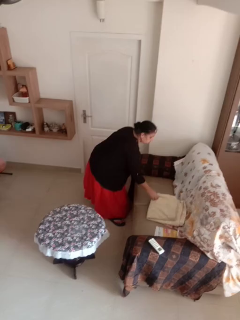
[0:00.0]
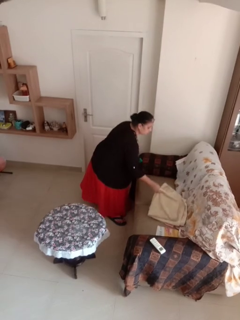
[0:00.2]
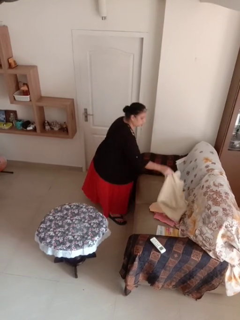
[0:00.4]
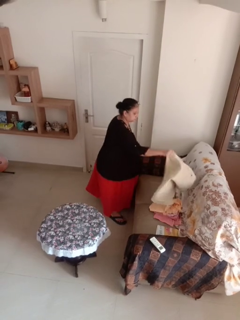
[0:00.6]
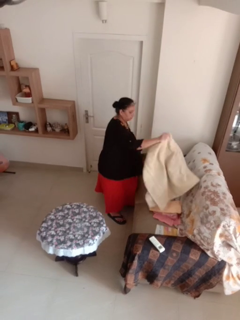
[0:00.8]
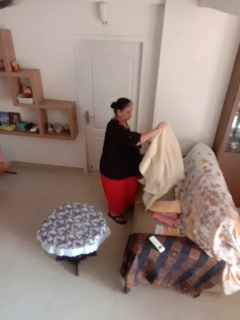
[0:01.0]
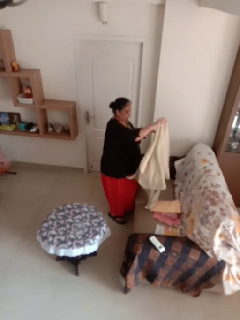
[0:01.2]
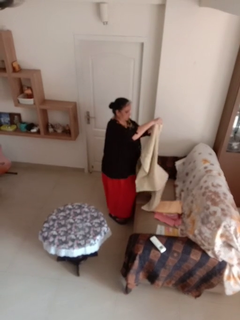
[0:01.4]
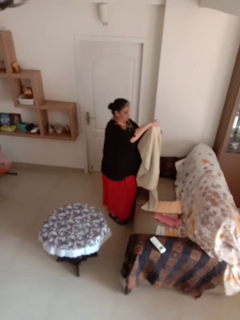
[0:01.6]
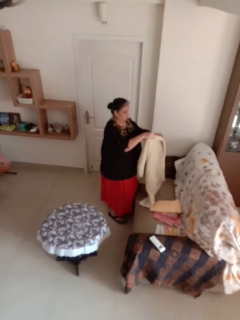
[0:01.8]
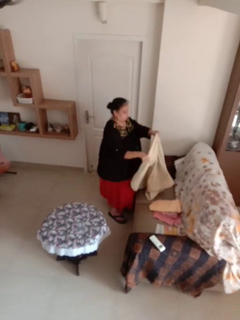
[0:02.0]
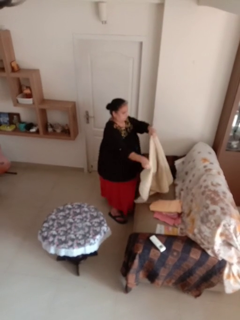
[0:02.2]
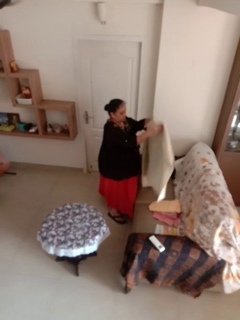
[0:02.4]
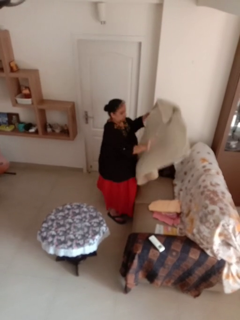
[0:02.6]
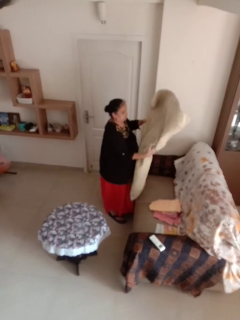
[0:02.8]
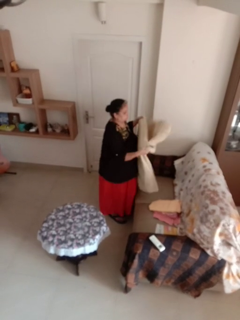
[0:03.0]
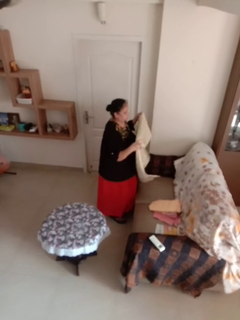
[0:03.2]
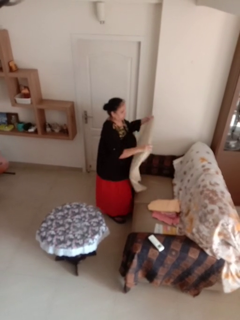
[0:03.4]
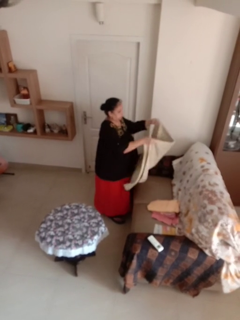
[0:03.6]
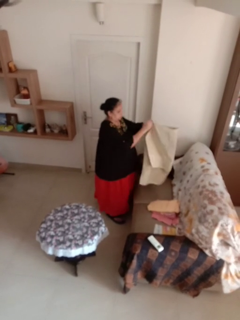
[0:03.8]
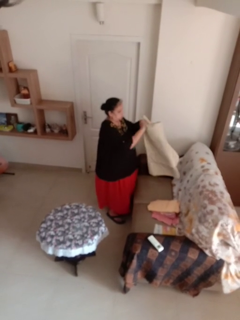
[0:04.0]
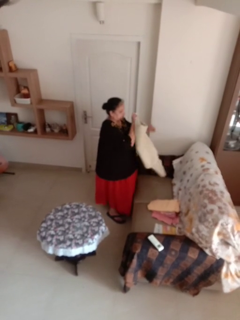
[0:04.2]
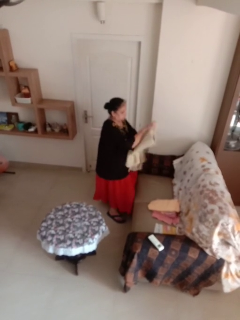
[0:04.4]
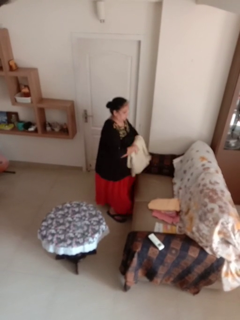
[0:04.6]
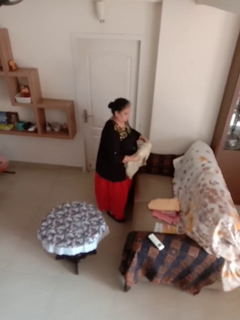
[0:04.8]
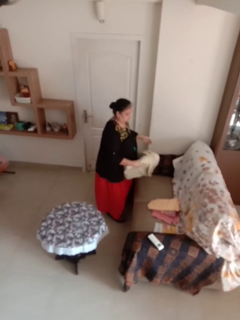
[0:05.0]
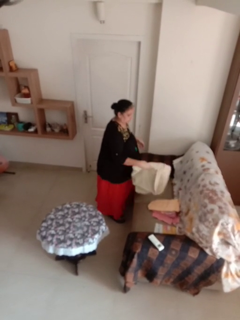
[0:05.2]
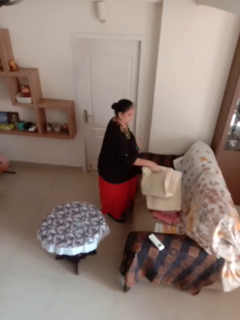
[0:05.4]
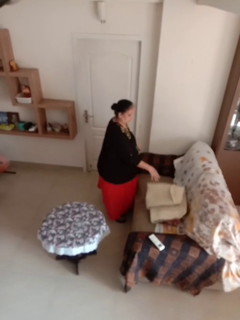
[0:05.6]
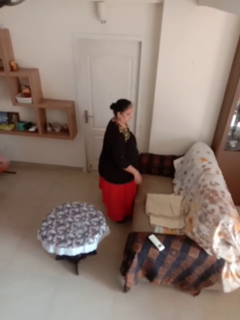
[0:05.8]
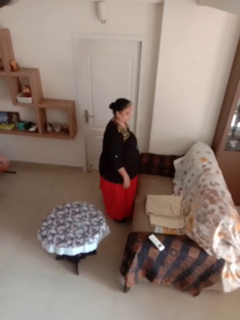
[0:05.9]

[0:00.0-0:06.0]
person folds towel

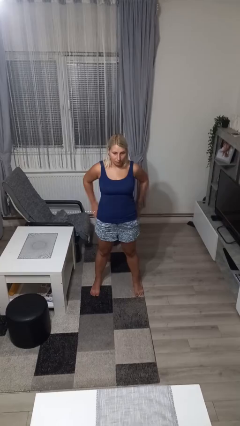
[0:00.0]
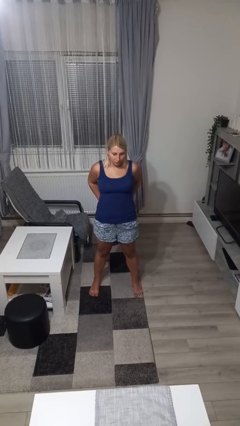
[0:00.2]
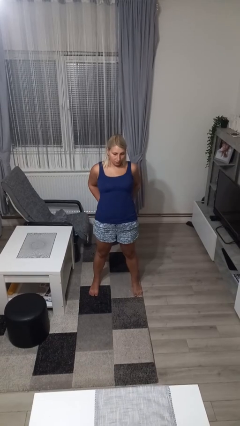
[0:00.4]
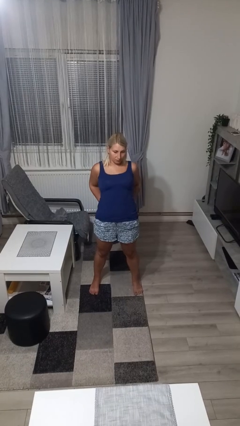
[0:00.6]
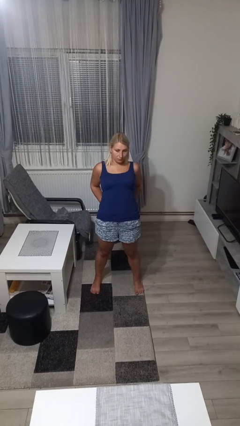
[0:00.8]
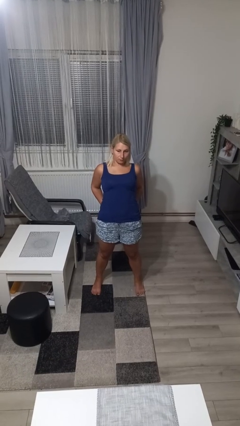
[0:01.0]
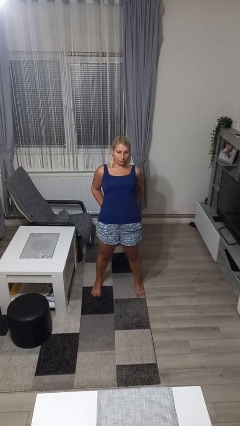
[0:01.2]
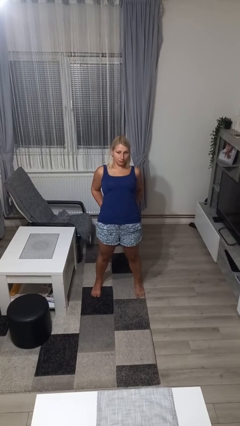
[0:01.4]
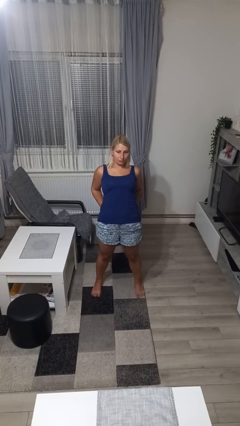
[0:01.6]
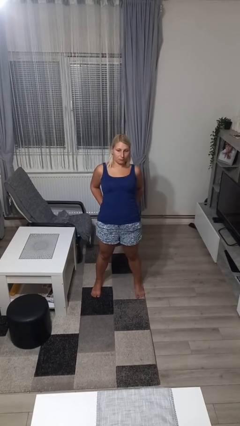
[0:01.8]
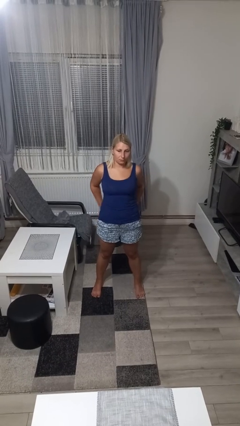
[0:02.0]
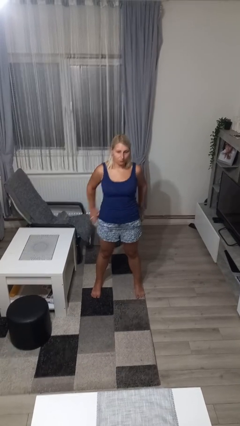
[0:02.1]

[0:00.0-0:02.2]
person stretches back

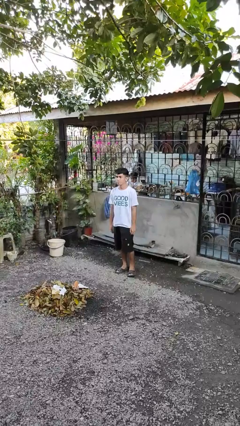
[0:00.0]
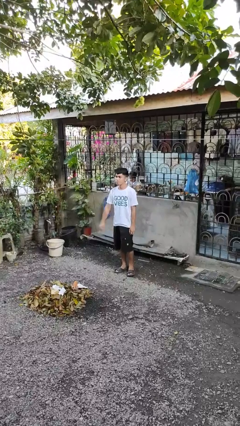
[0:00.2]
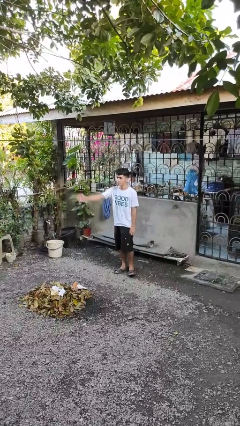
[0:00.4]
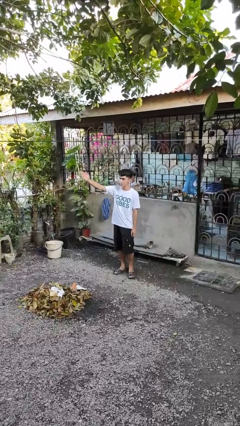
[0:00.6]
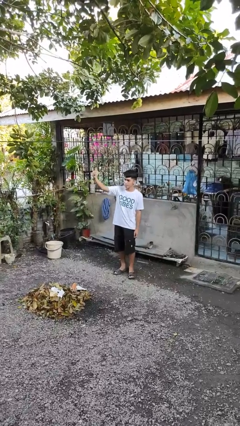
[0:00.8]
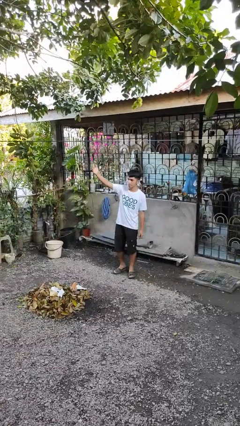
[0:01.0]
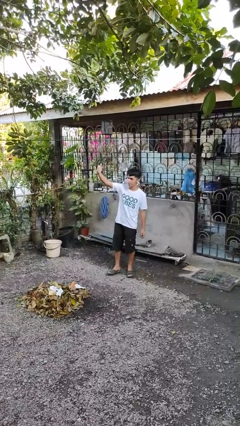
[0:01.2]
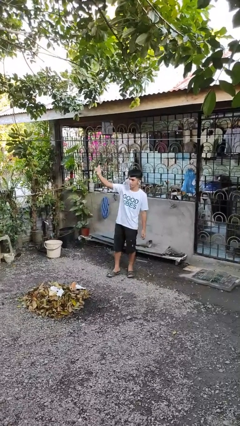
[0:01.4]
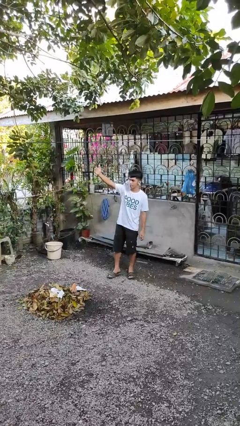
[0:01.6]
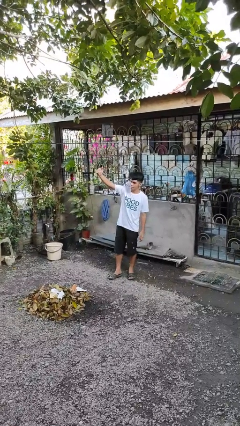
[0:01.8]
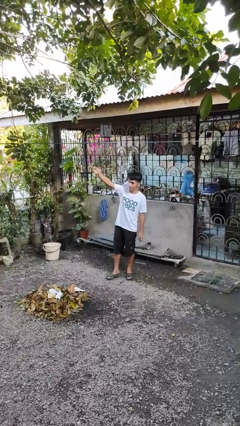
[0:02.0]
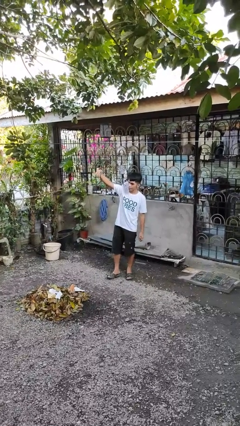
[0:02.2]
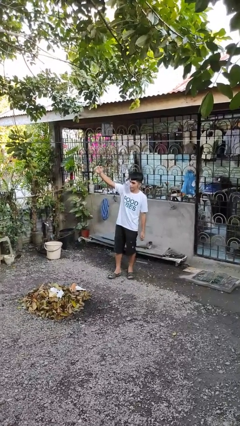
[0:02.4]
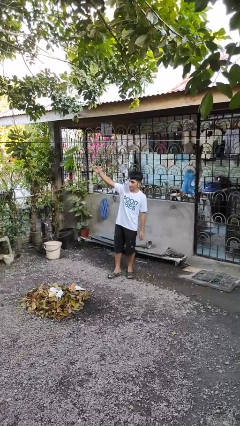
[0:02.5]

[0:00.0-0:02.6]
person gestures come here

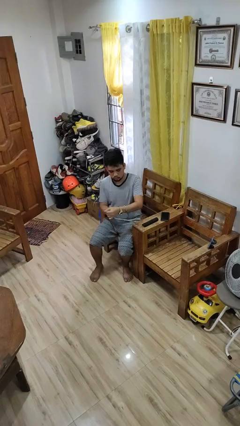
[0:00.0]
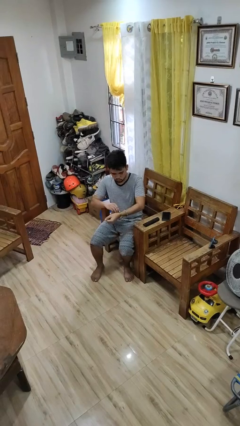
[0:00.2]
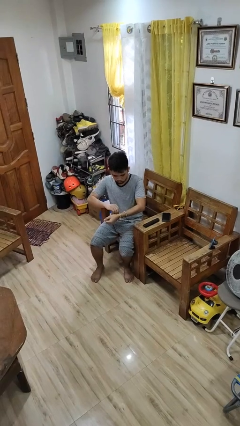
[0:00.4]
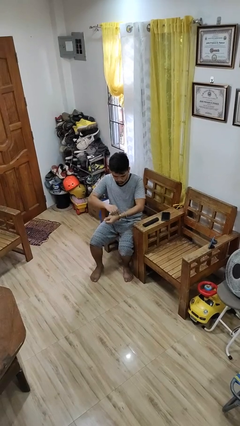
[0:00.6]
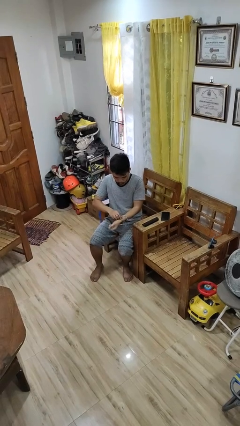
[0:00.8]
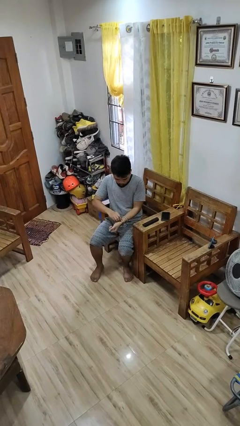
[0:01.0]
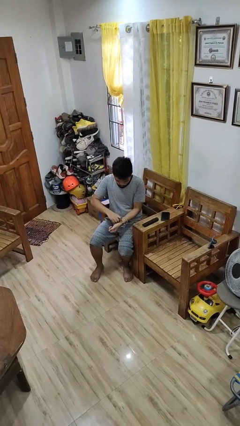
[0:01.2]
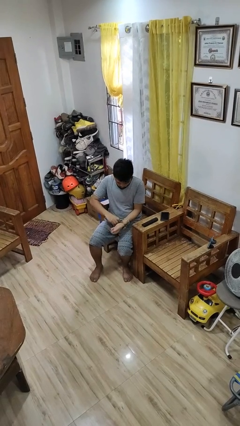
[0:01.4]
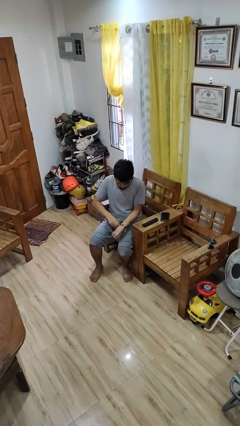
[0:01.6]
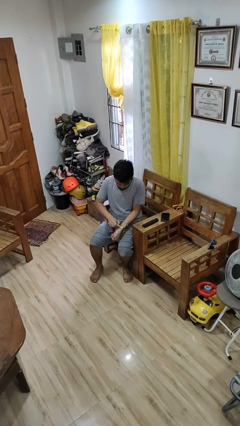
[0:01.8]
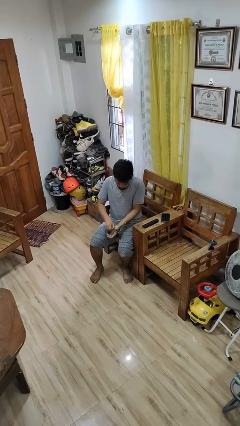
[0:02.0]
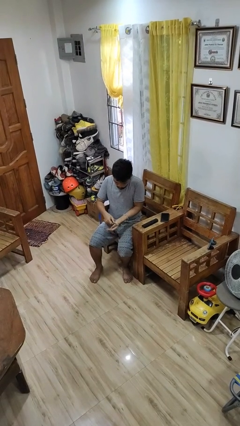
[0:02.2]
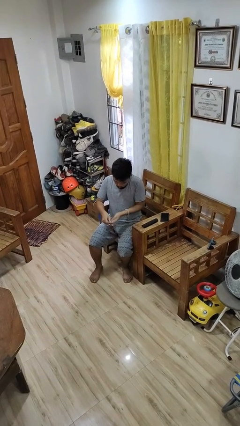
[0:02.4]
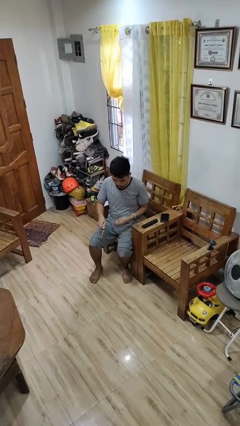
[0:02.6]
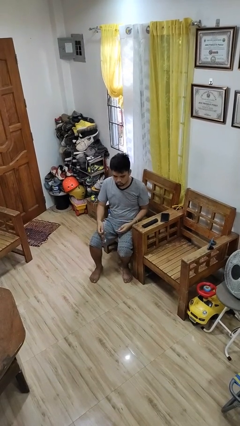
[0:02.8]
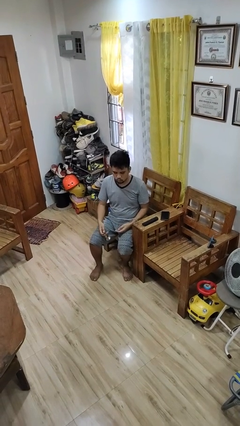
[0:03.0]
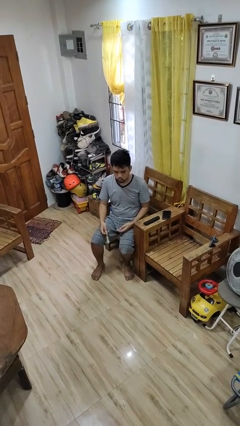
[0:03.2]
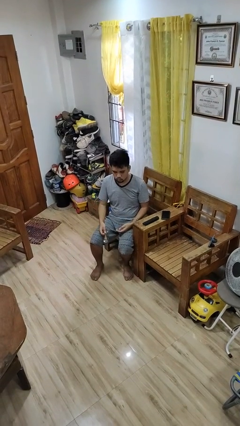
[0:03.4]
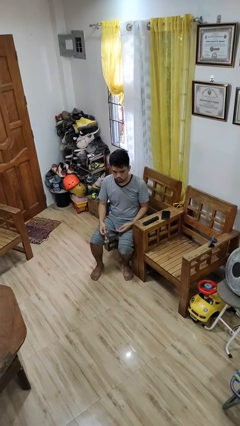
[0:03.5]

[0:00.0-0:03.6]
person takes off wristwatch

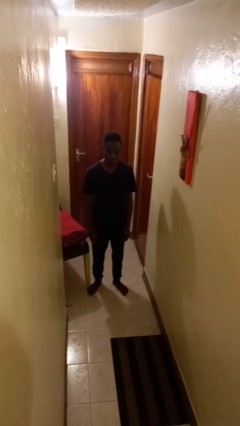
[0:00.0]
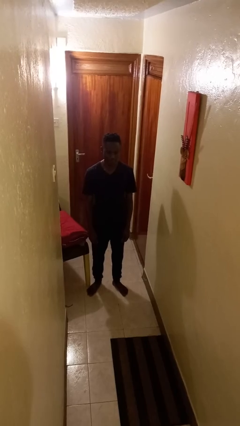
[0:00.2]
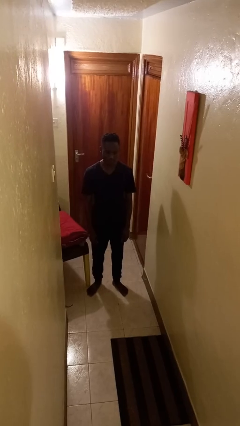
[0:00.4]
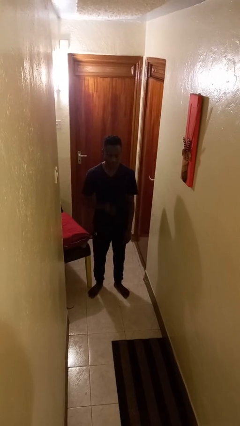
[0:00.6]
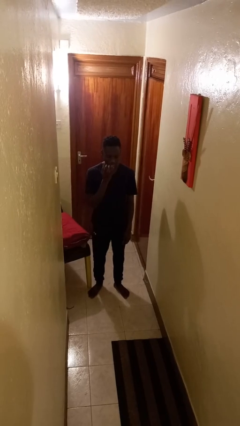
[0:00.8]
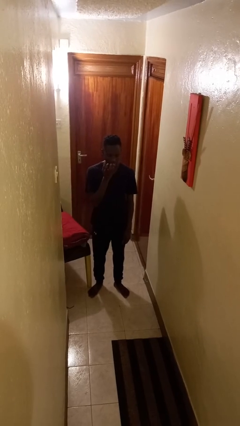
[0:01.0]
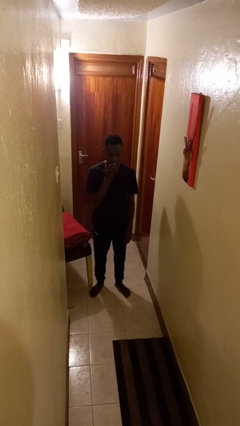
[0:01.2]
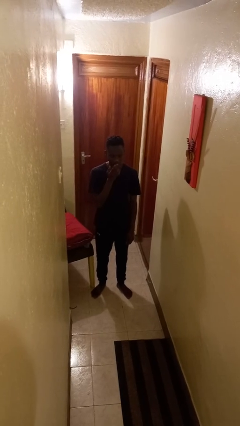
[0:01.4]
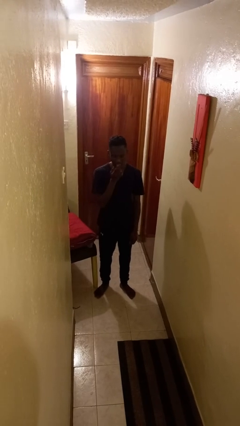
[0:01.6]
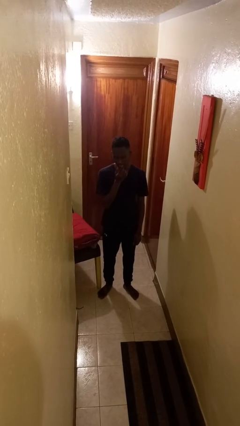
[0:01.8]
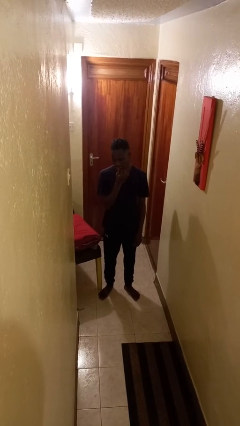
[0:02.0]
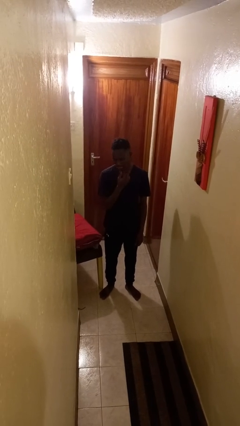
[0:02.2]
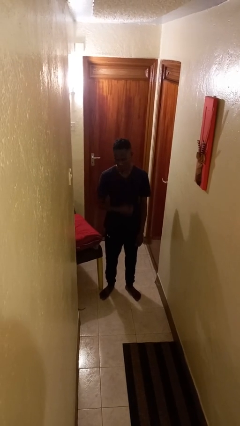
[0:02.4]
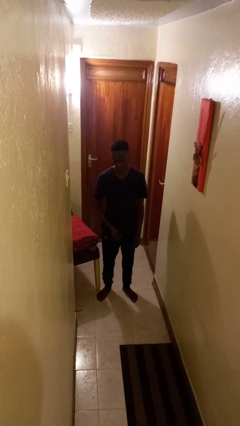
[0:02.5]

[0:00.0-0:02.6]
person licks fingers

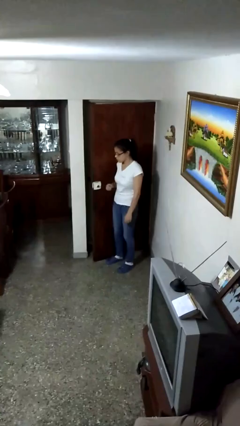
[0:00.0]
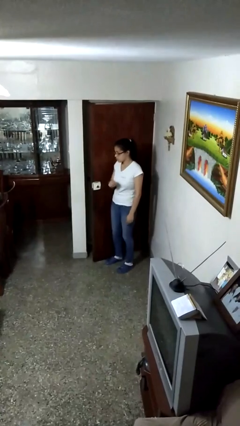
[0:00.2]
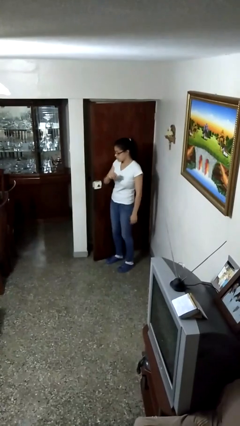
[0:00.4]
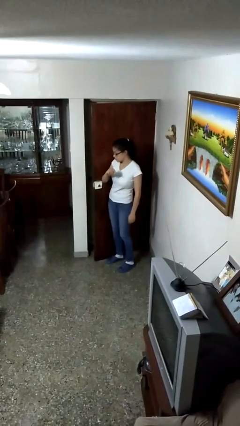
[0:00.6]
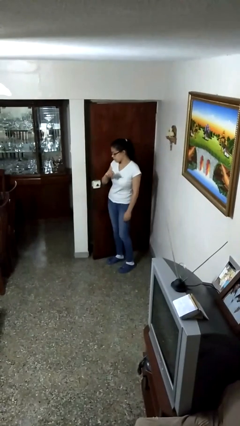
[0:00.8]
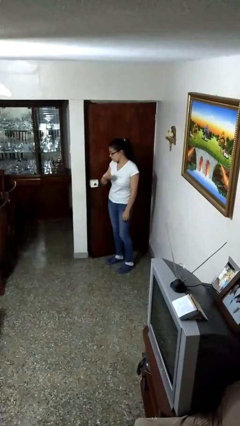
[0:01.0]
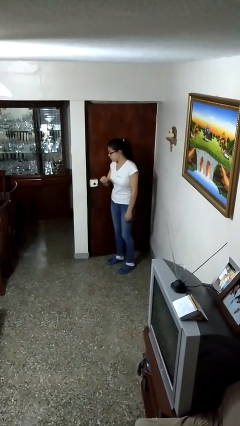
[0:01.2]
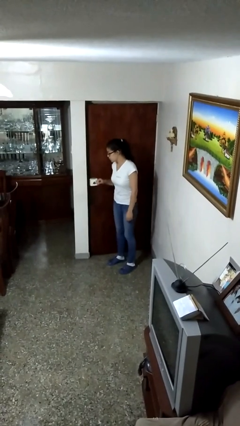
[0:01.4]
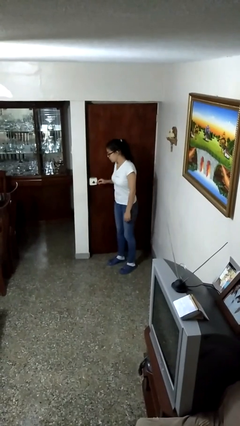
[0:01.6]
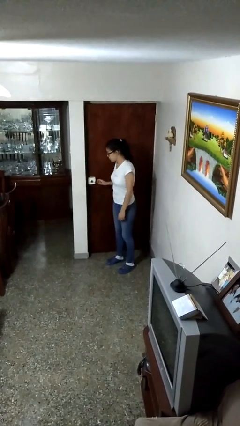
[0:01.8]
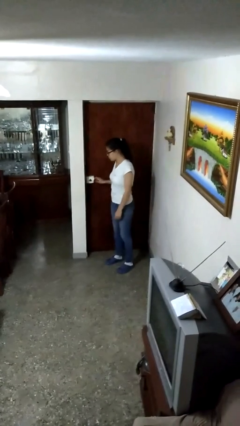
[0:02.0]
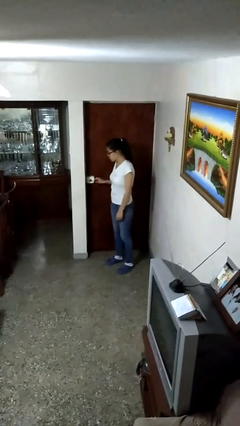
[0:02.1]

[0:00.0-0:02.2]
person closes door with hip

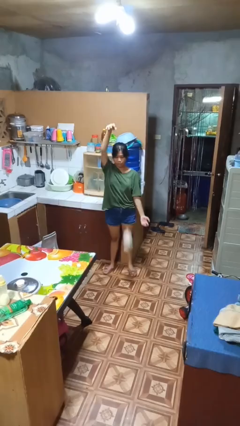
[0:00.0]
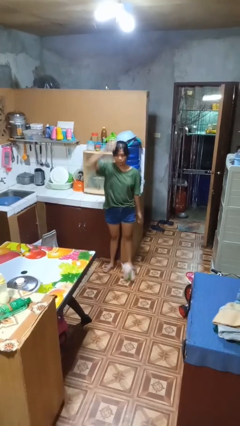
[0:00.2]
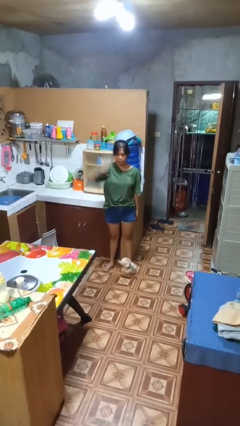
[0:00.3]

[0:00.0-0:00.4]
person catches dropped object
